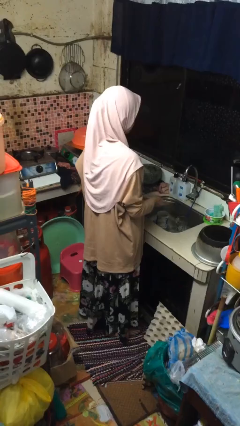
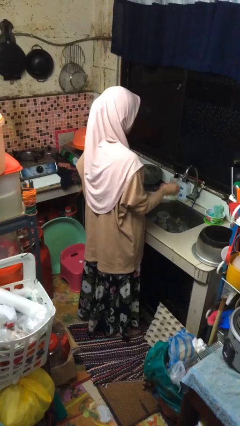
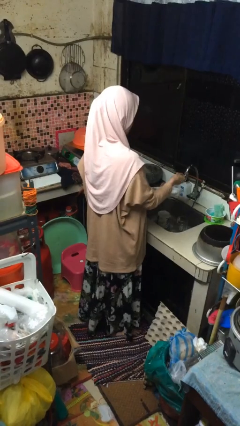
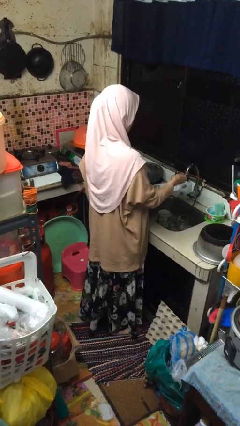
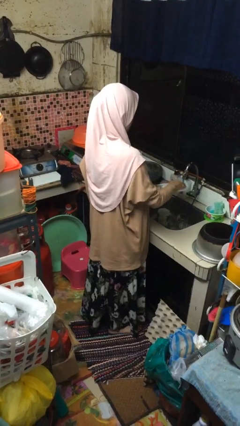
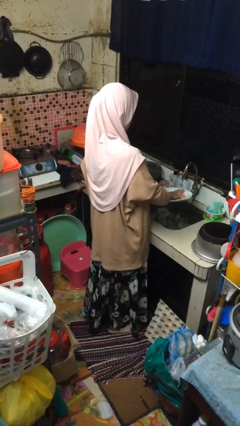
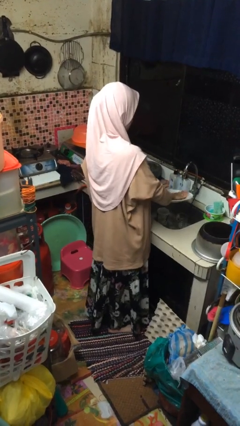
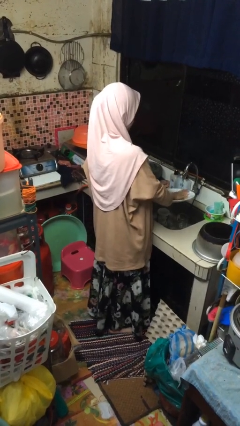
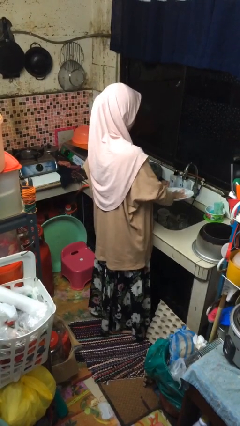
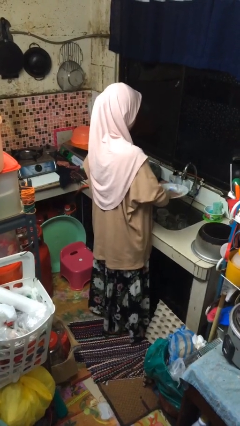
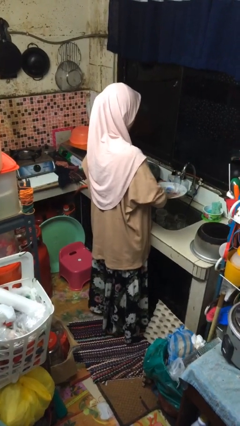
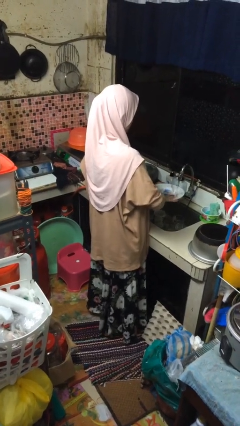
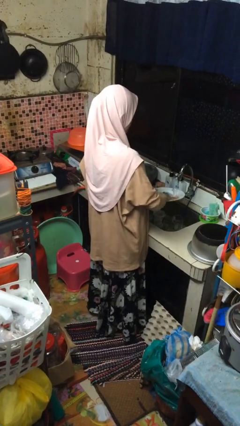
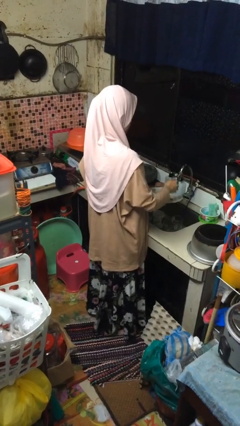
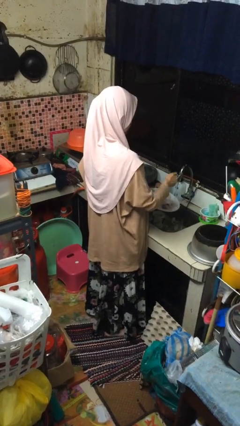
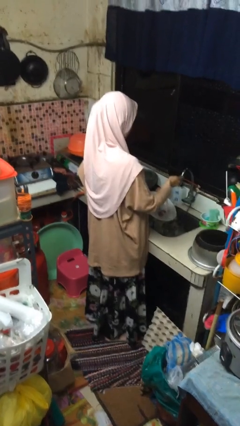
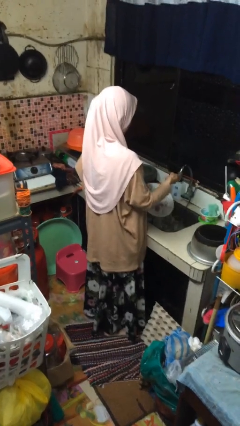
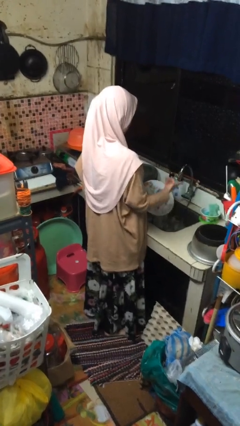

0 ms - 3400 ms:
person washes dish

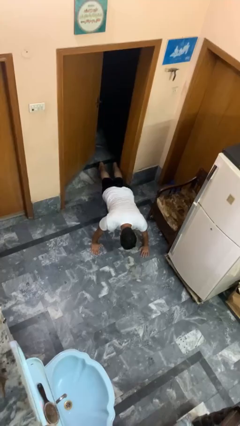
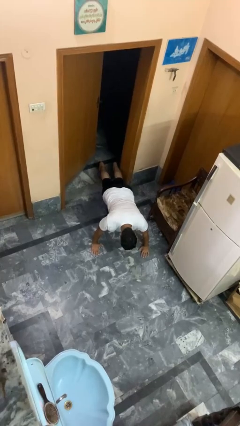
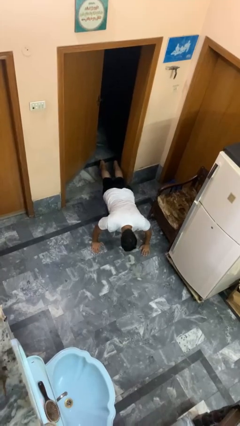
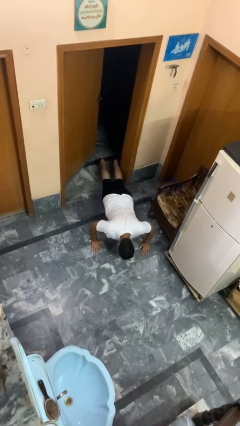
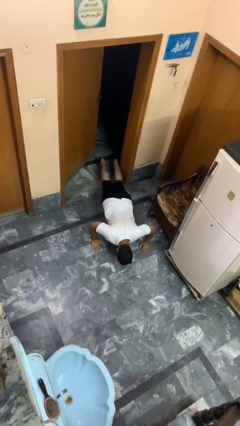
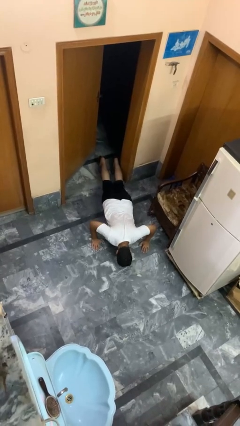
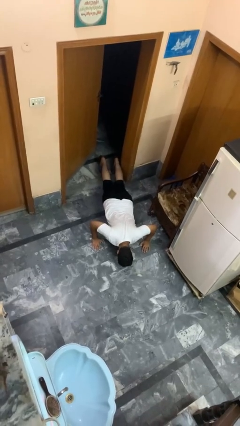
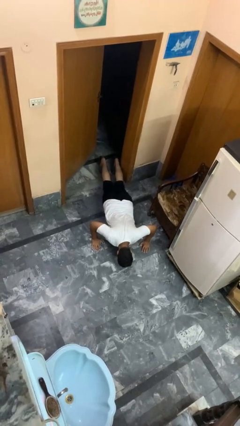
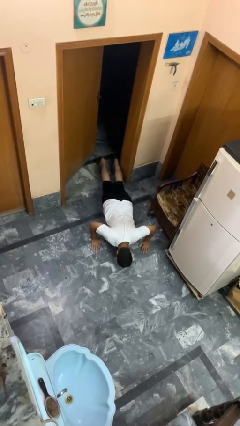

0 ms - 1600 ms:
person exercises with pushup

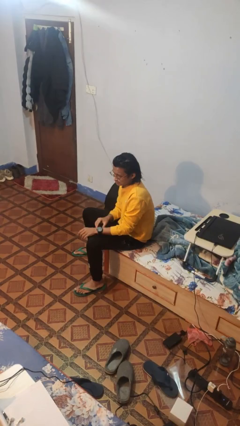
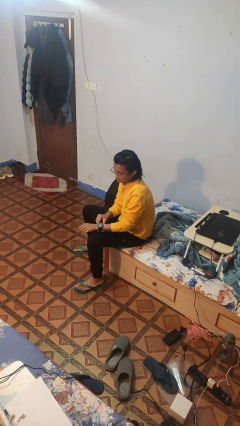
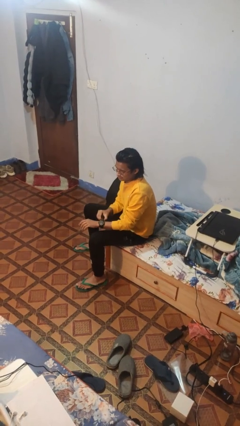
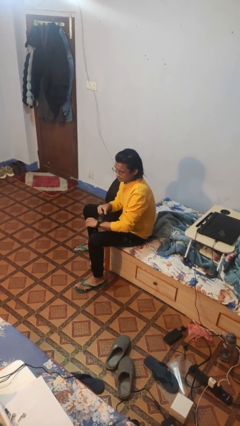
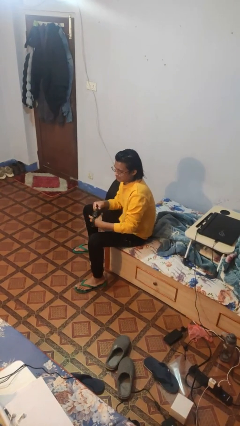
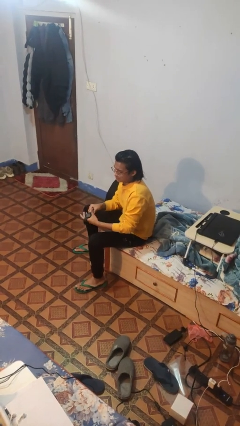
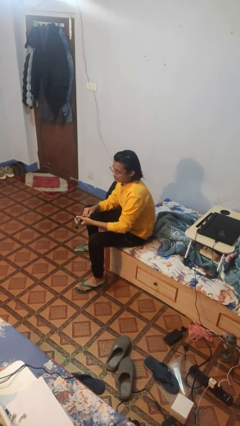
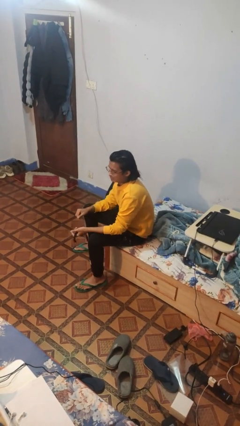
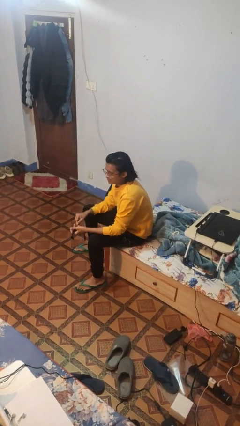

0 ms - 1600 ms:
person takes off wristwatch

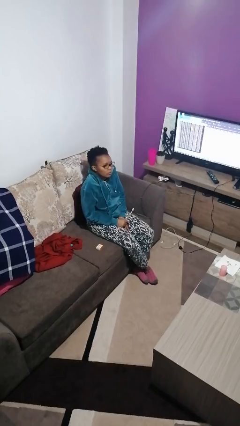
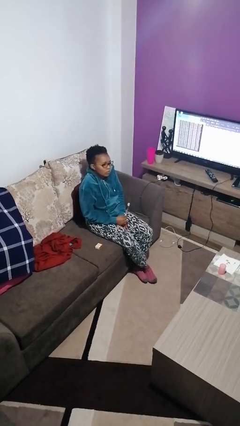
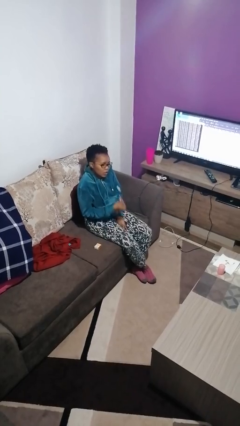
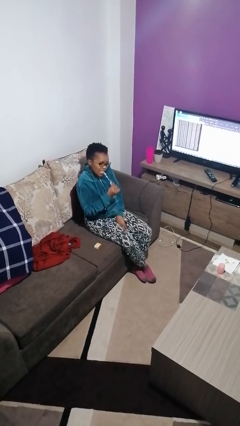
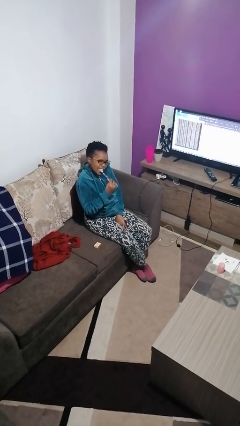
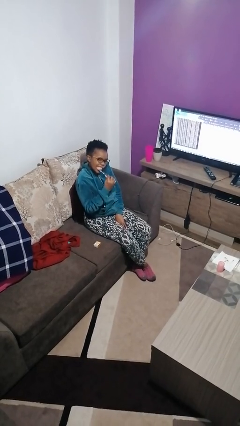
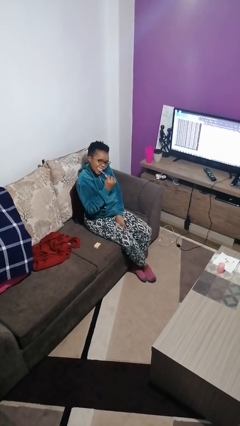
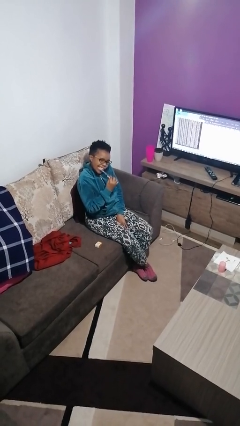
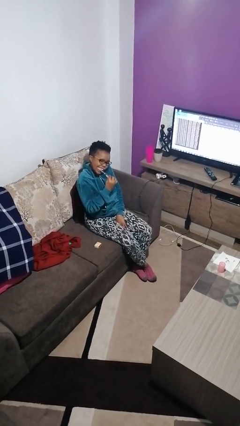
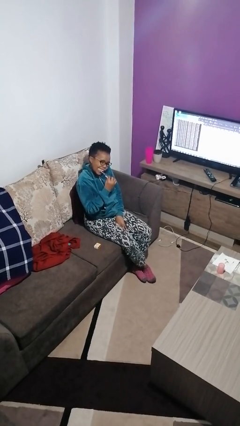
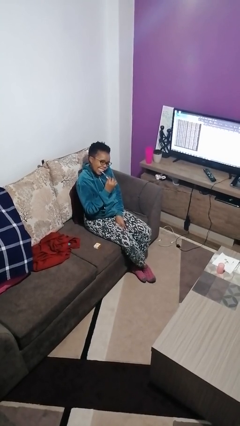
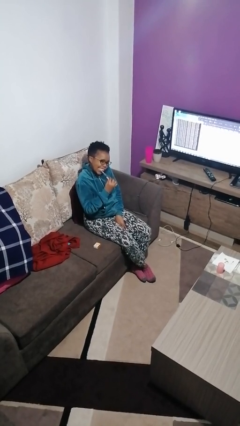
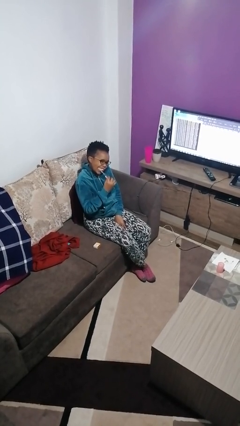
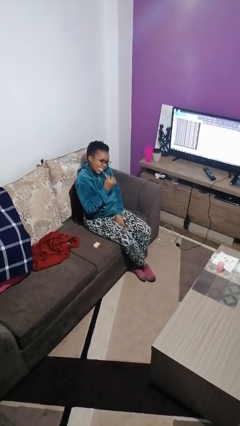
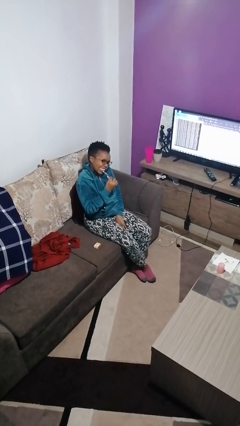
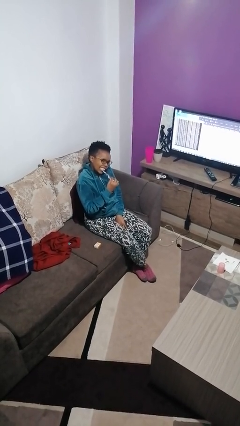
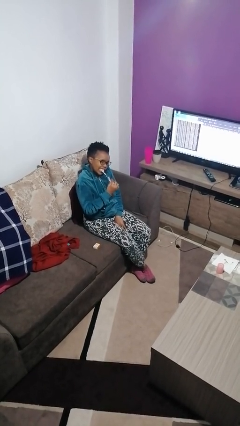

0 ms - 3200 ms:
person brushes teeth

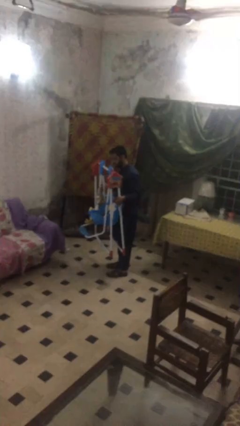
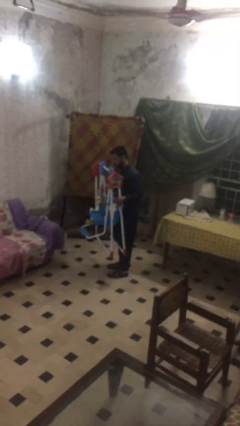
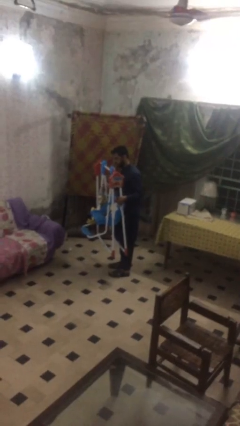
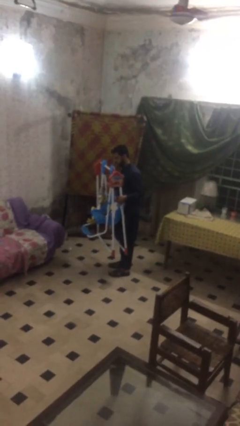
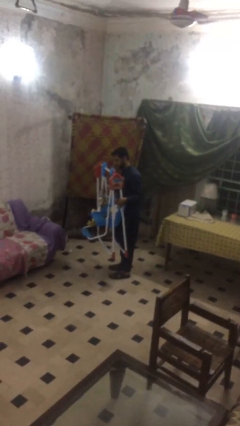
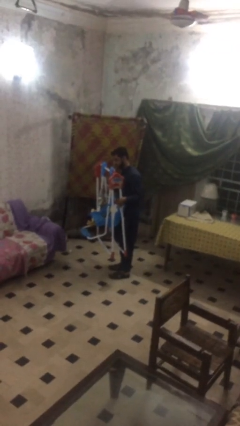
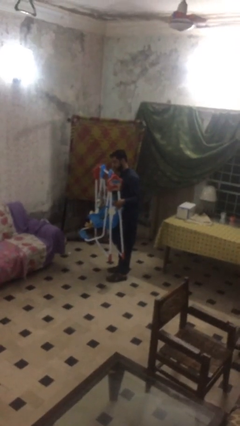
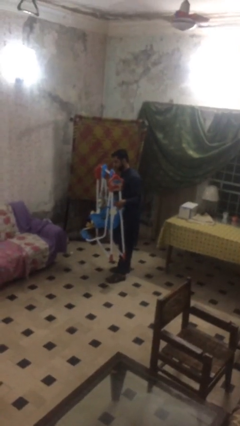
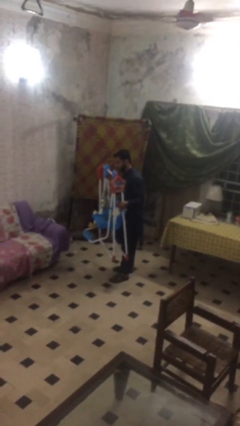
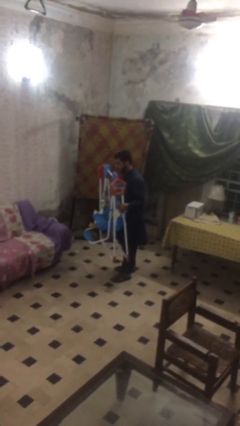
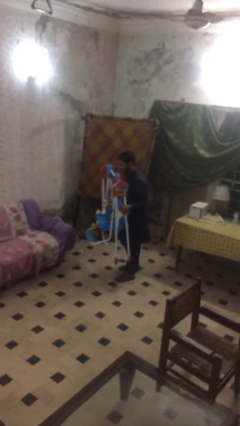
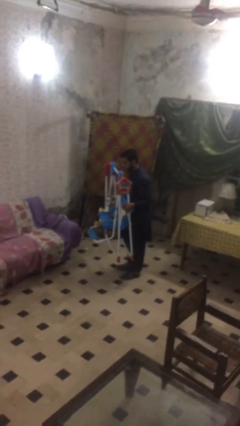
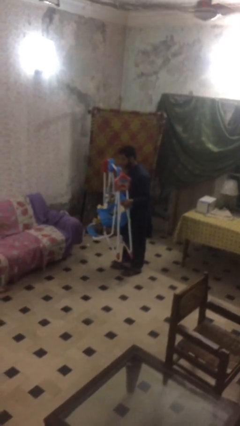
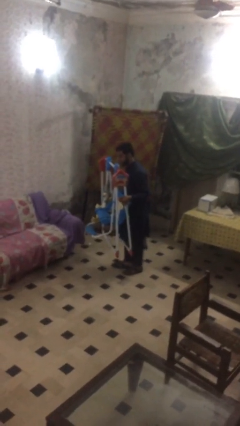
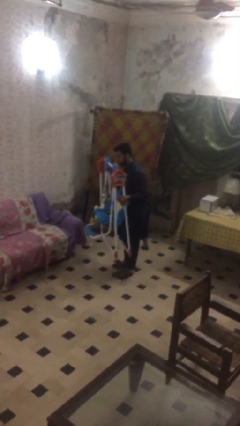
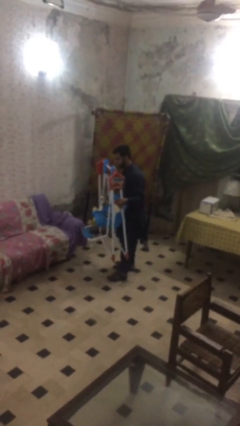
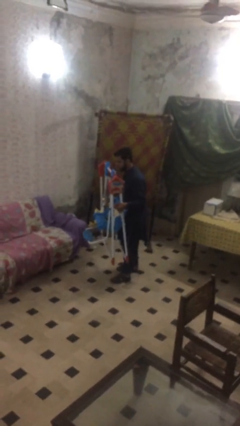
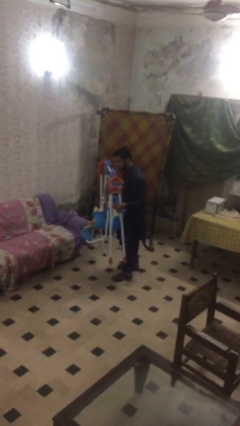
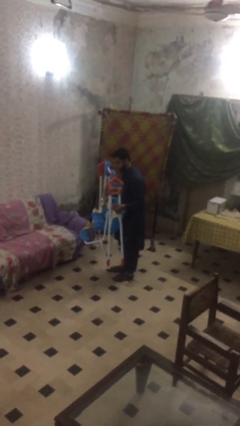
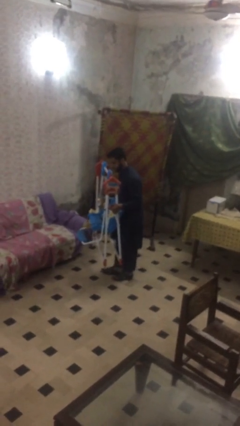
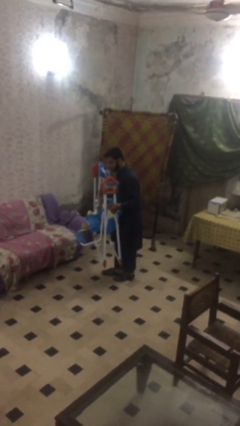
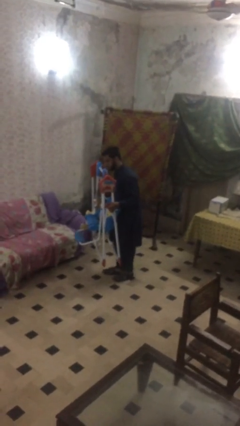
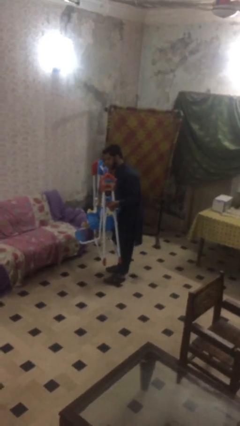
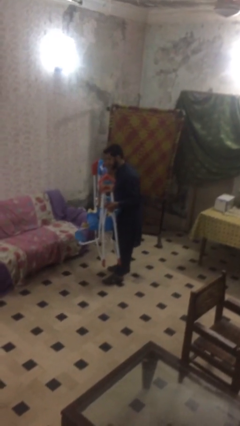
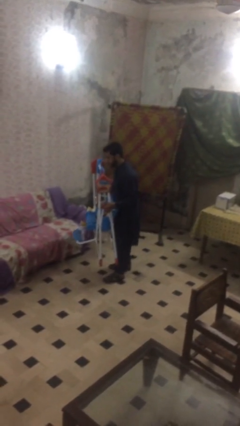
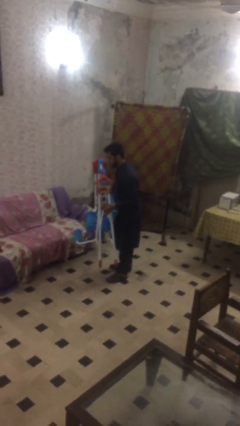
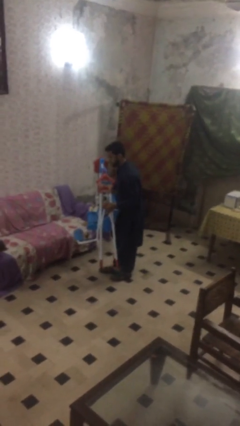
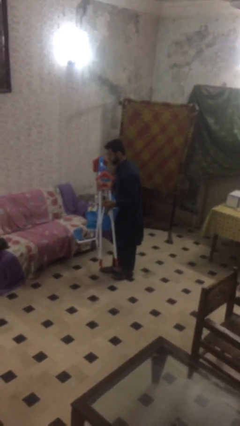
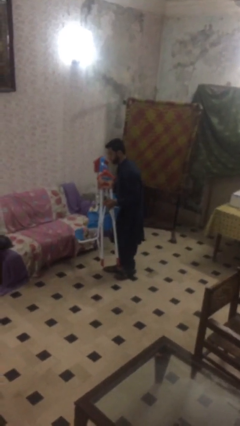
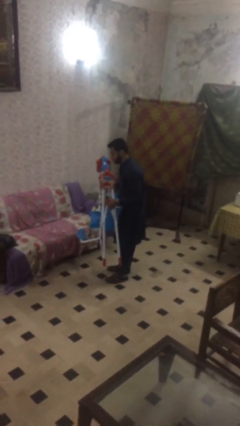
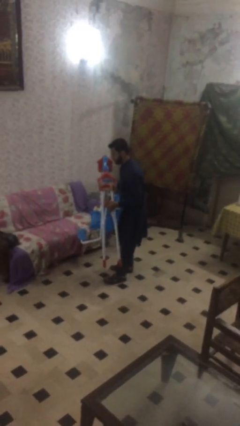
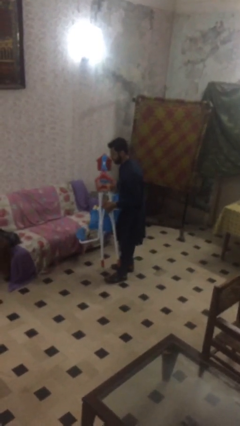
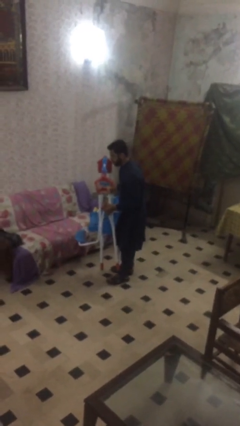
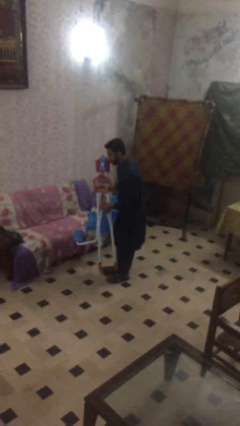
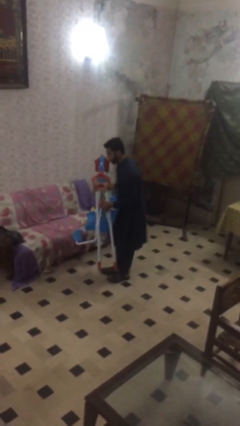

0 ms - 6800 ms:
person carries heavy object

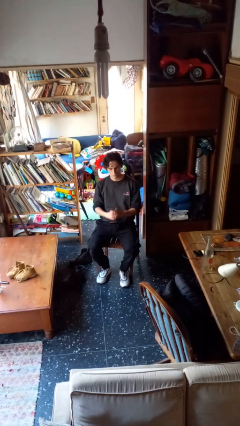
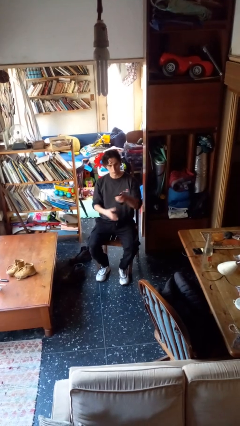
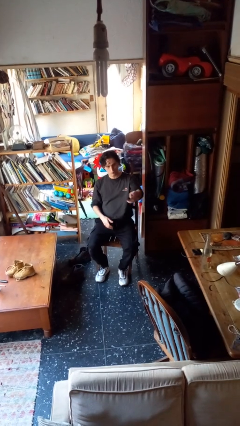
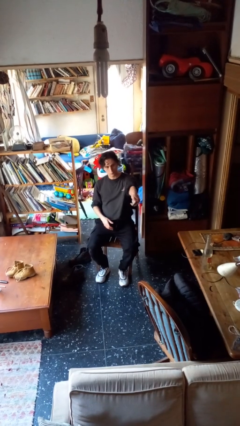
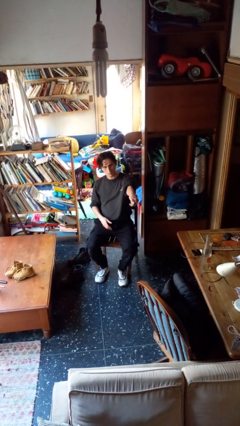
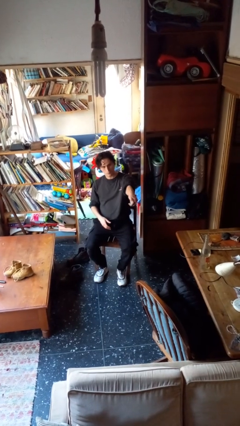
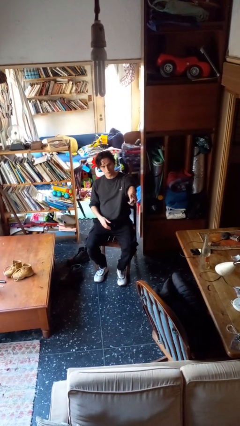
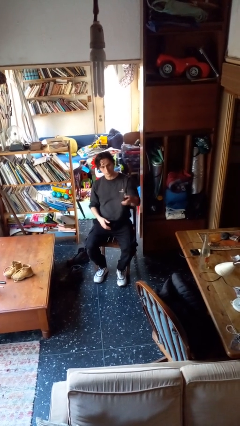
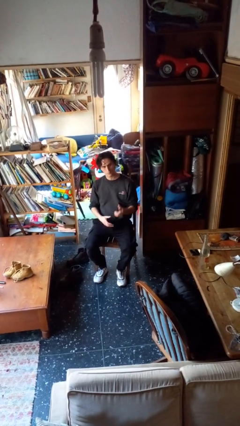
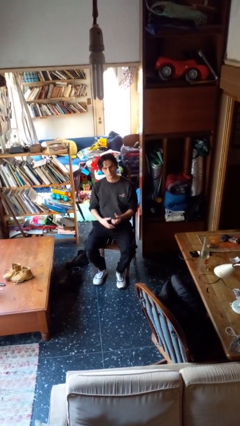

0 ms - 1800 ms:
person uses television remote
